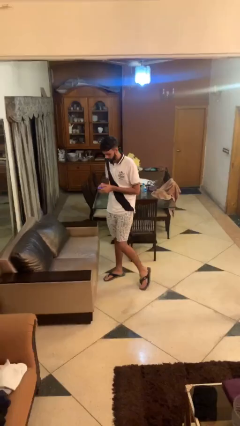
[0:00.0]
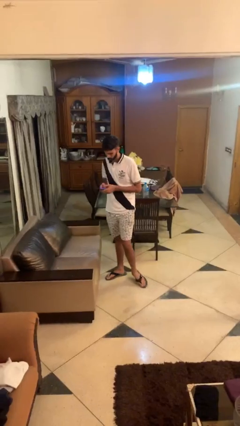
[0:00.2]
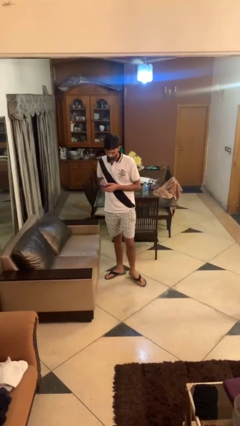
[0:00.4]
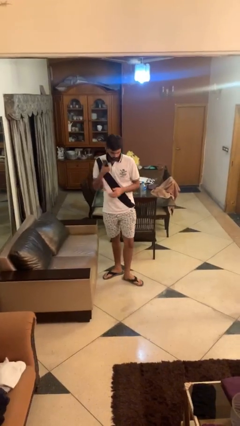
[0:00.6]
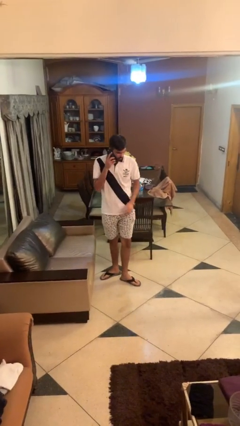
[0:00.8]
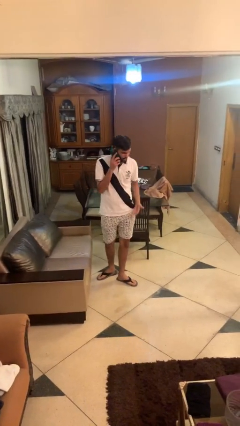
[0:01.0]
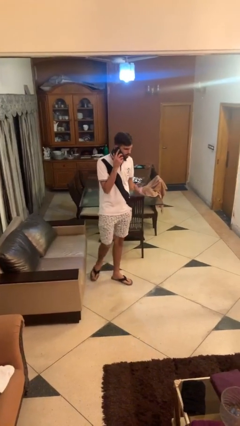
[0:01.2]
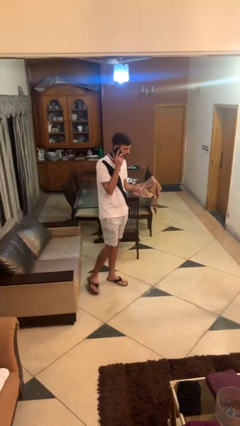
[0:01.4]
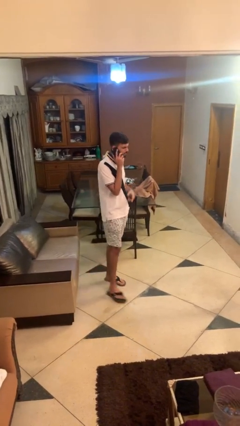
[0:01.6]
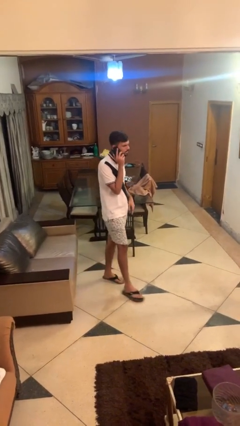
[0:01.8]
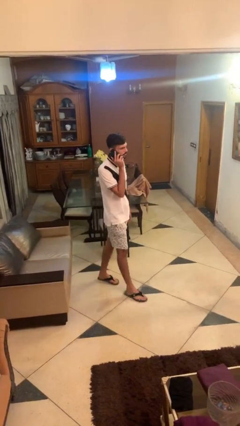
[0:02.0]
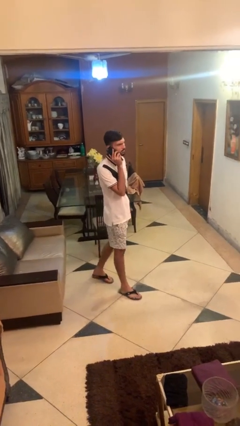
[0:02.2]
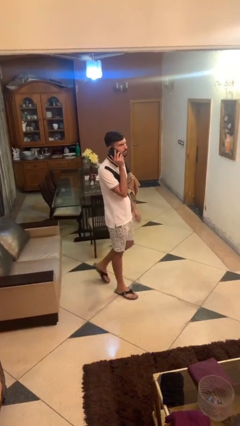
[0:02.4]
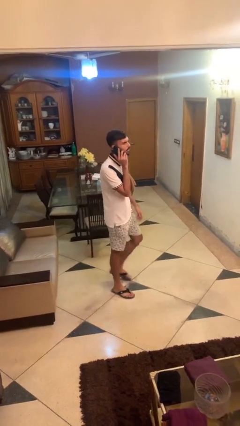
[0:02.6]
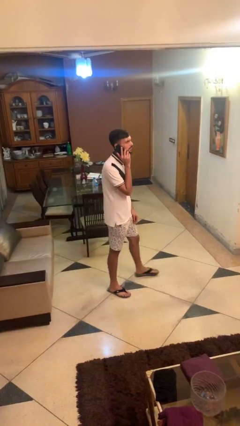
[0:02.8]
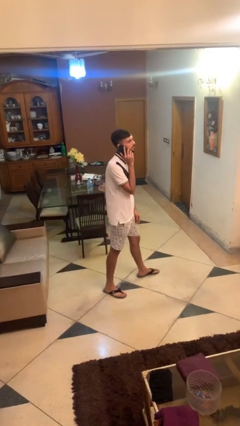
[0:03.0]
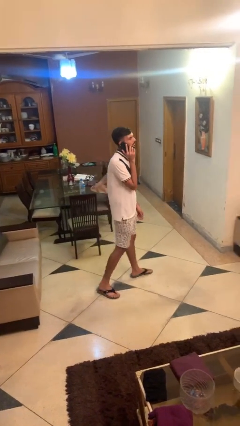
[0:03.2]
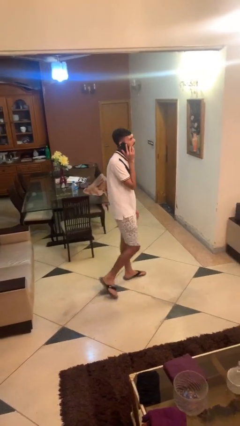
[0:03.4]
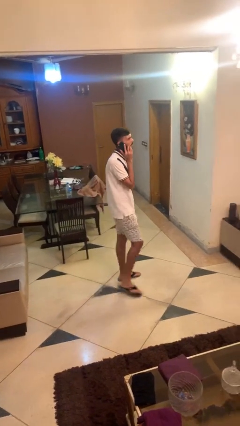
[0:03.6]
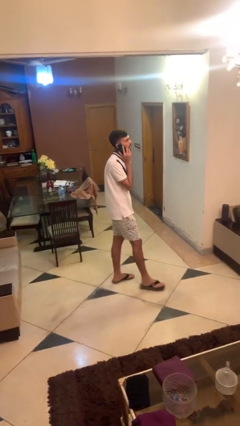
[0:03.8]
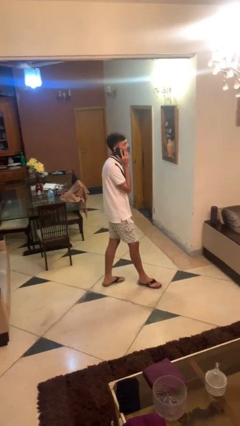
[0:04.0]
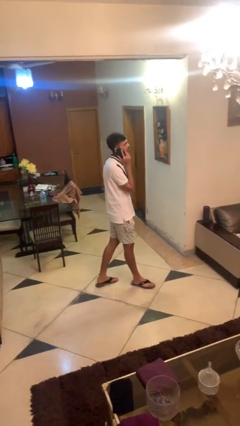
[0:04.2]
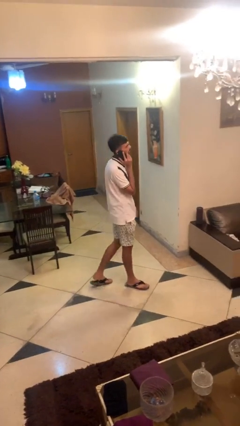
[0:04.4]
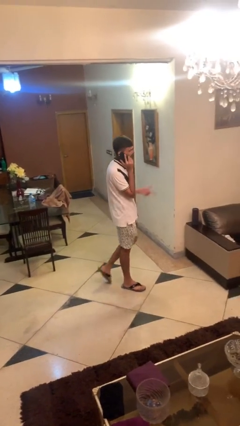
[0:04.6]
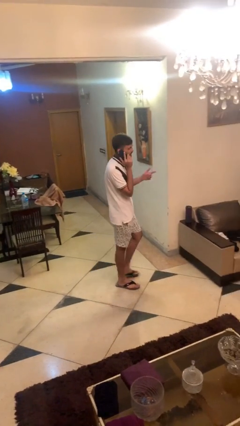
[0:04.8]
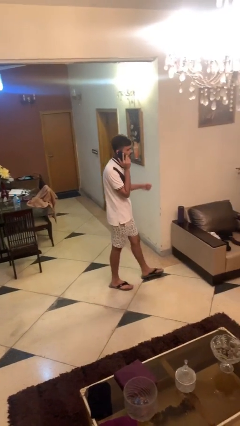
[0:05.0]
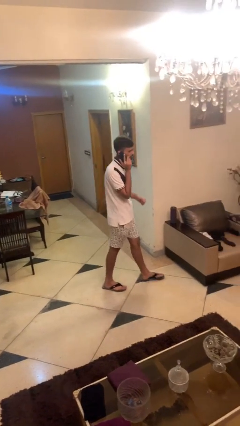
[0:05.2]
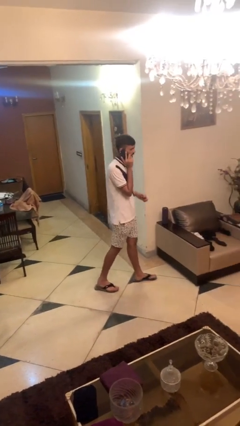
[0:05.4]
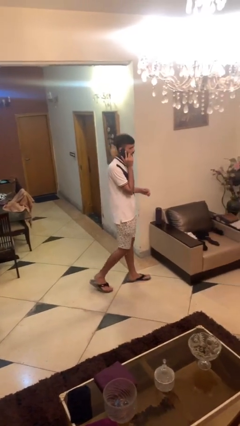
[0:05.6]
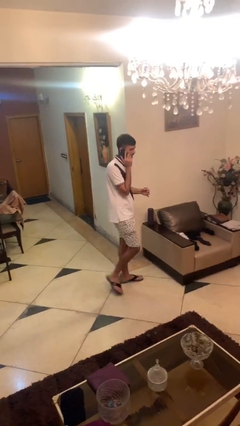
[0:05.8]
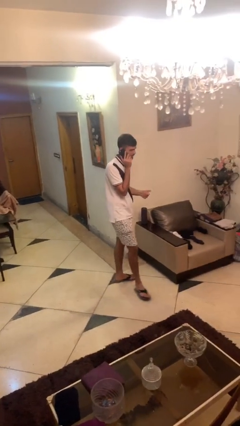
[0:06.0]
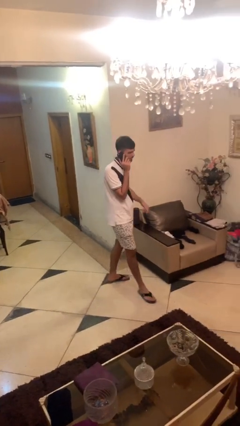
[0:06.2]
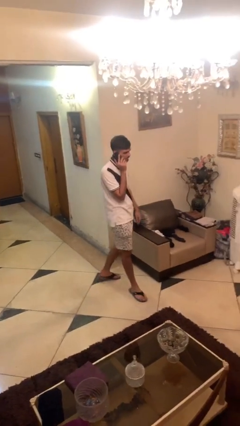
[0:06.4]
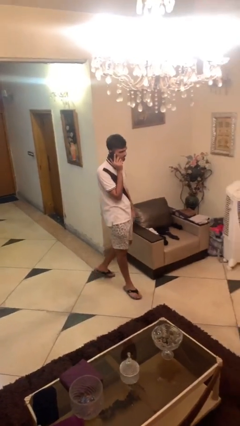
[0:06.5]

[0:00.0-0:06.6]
person talks on phone

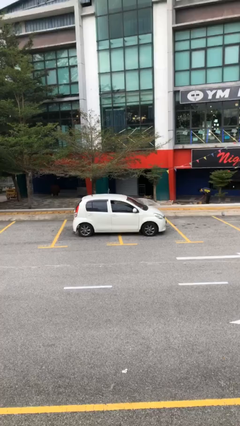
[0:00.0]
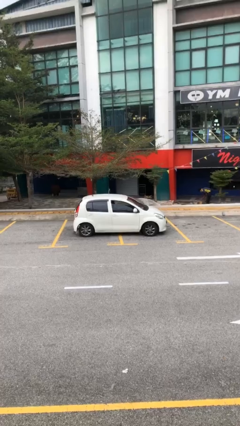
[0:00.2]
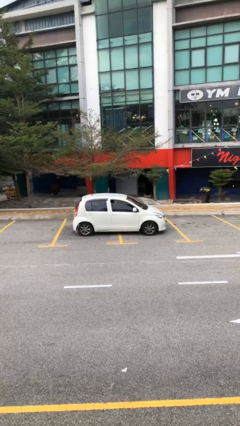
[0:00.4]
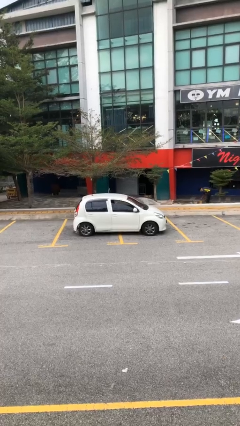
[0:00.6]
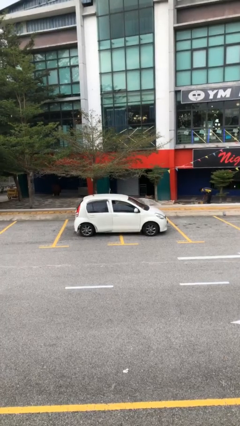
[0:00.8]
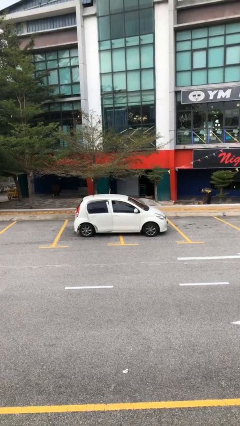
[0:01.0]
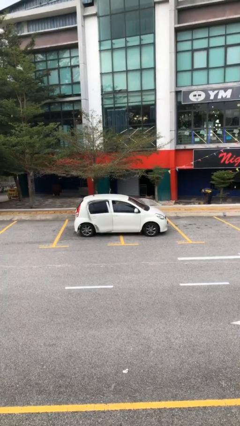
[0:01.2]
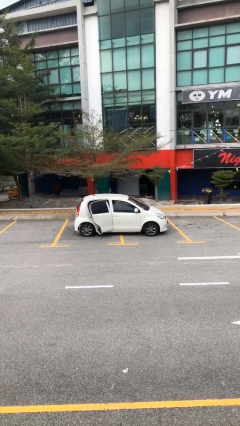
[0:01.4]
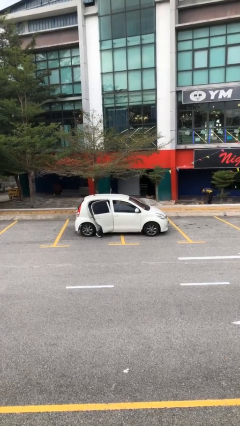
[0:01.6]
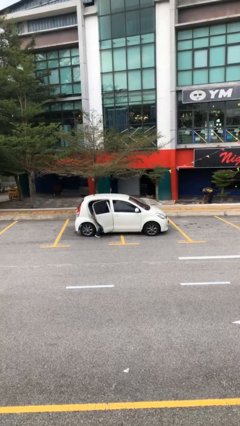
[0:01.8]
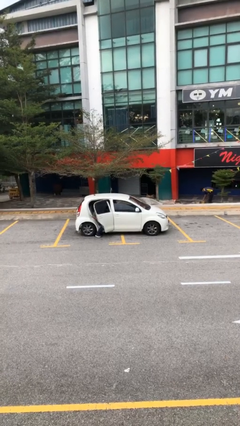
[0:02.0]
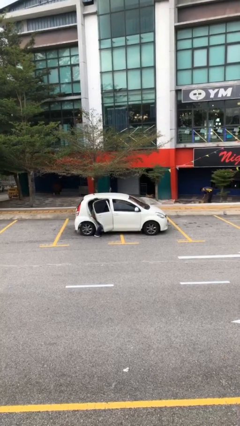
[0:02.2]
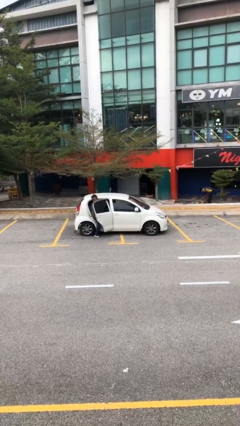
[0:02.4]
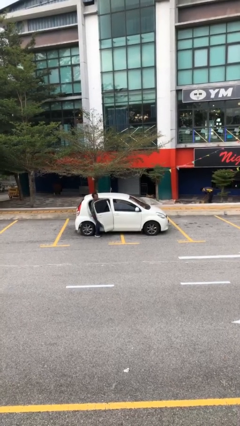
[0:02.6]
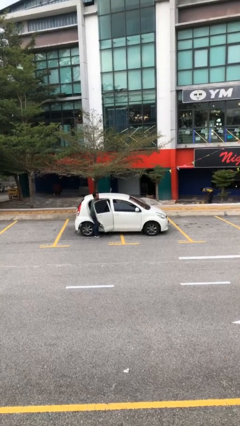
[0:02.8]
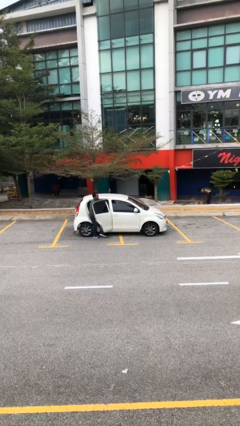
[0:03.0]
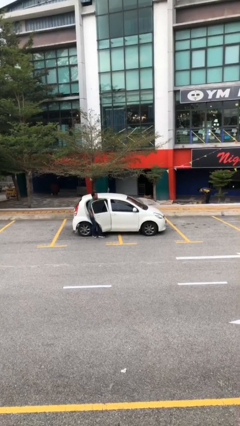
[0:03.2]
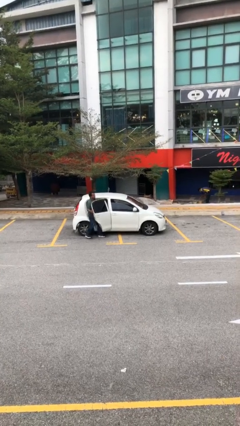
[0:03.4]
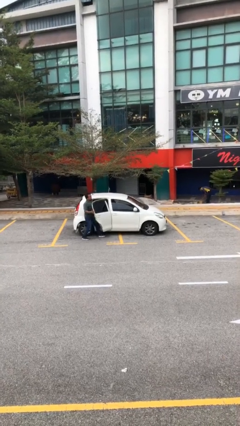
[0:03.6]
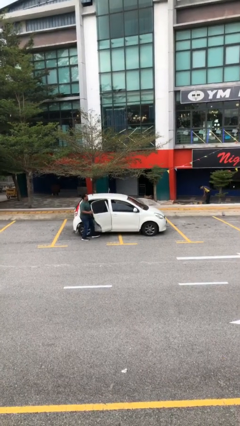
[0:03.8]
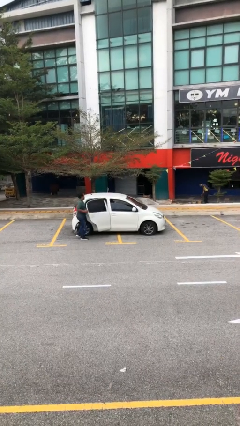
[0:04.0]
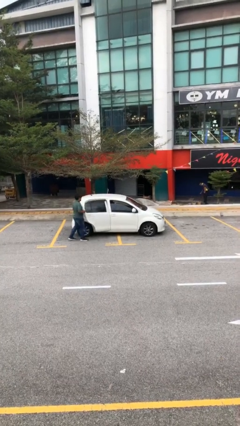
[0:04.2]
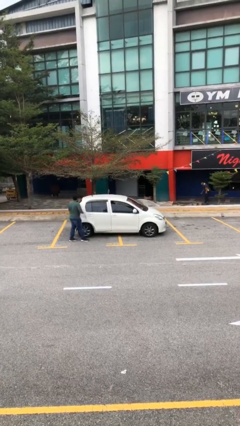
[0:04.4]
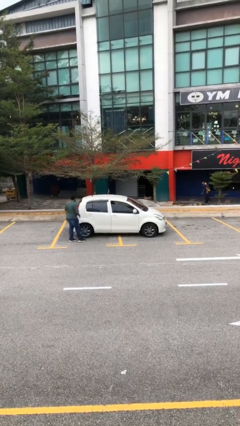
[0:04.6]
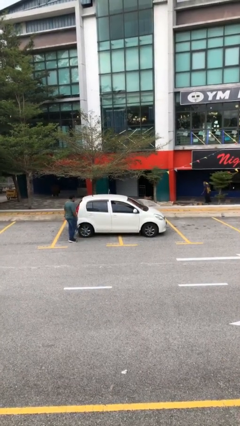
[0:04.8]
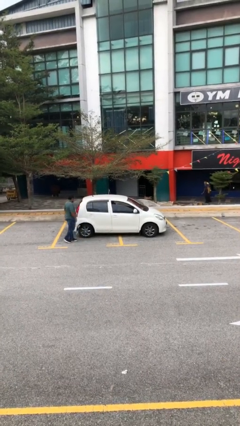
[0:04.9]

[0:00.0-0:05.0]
car drops off person

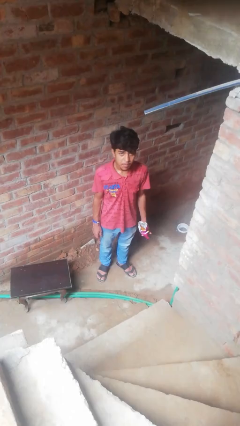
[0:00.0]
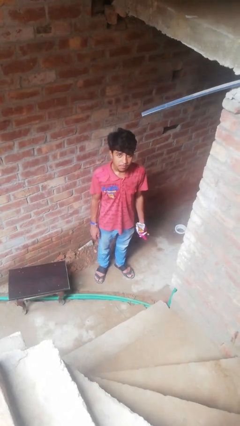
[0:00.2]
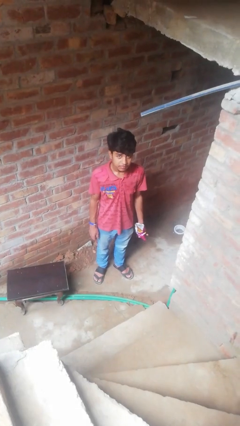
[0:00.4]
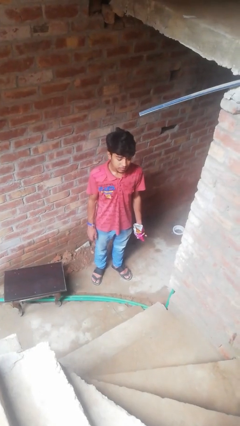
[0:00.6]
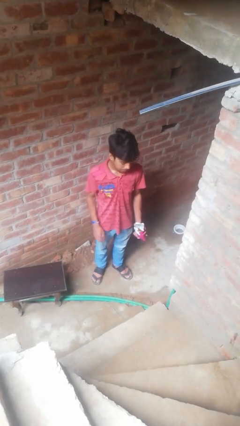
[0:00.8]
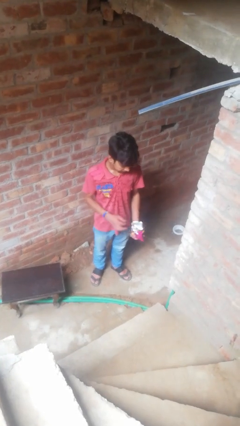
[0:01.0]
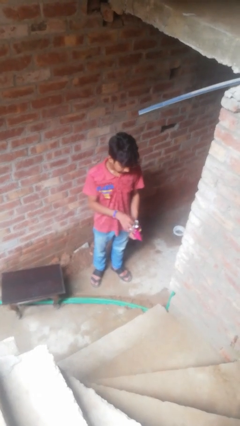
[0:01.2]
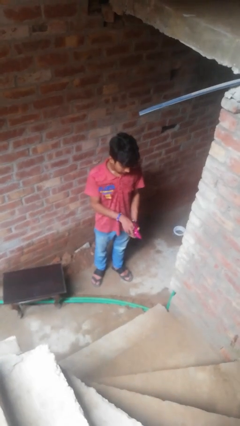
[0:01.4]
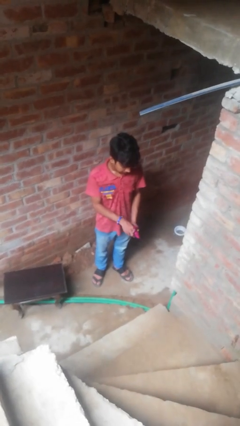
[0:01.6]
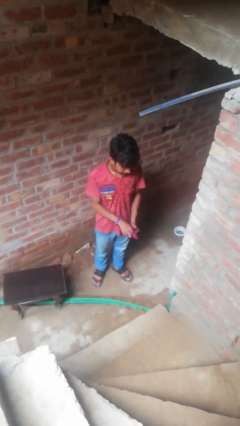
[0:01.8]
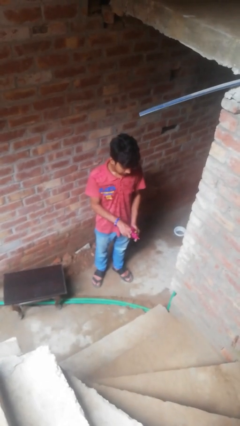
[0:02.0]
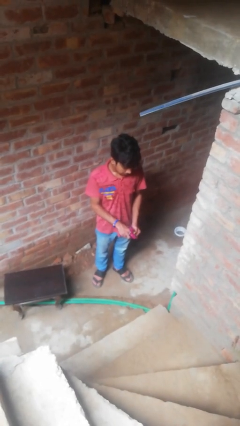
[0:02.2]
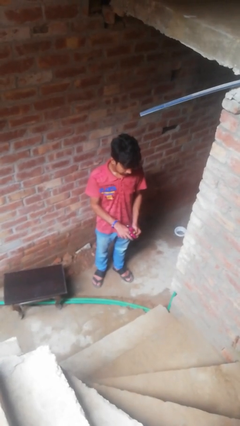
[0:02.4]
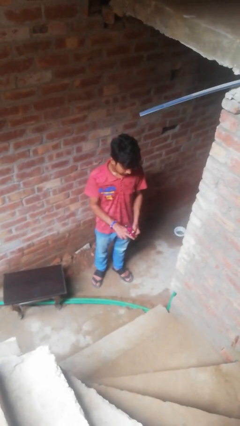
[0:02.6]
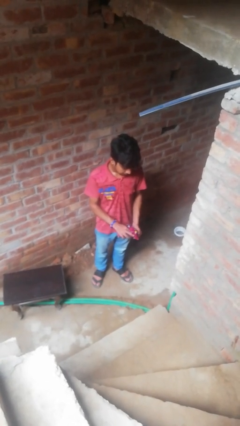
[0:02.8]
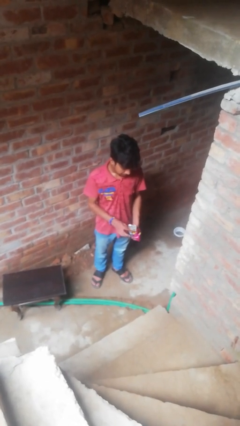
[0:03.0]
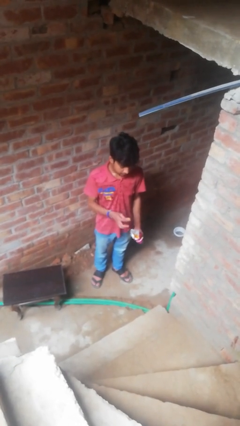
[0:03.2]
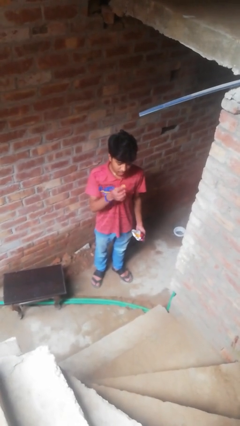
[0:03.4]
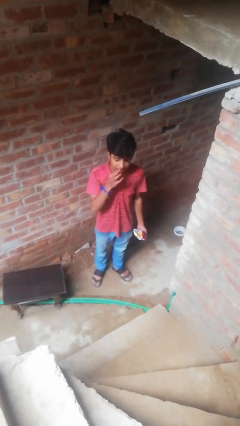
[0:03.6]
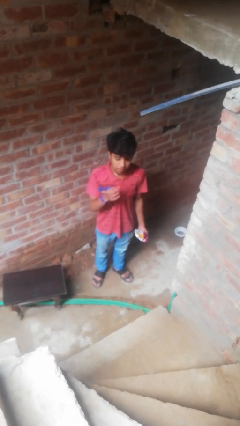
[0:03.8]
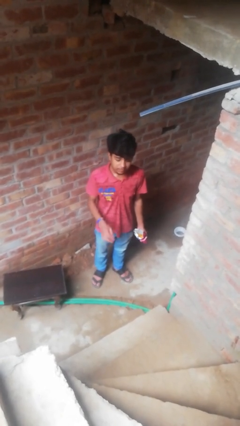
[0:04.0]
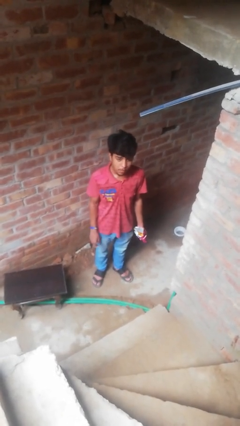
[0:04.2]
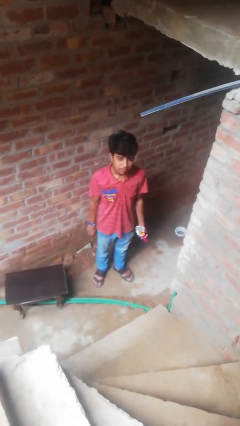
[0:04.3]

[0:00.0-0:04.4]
person eats snack from bag

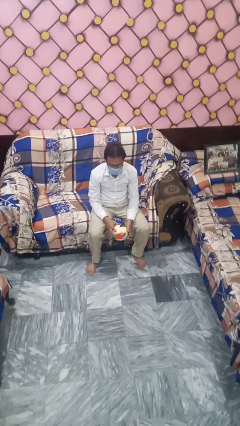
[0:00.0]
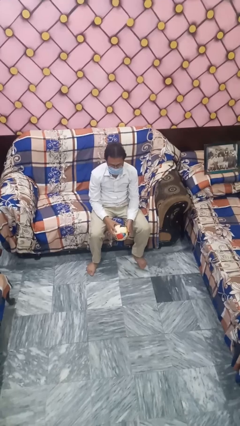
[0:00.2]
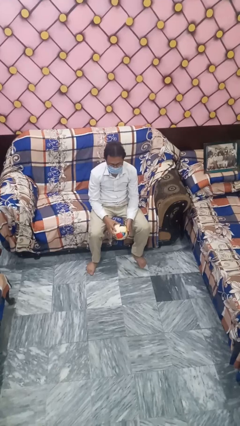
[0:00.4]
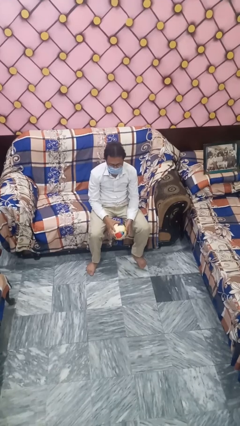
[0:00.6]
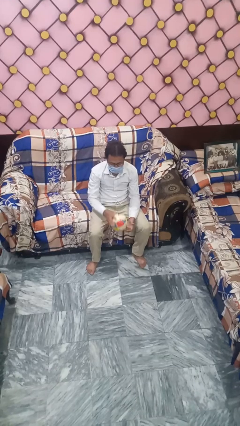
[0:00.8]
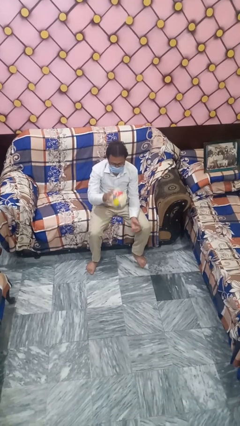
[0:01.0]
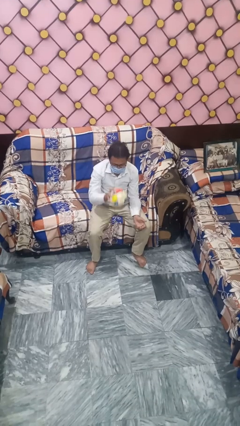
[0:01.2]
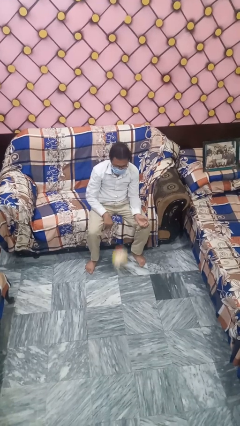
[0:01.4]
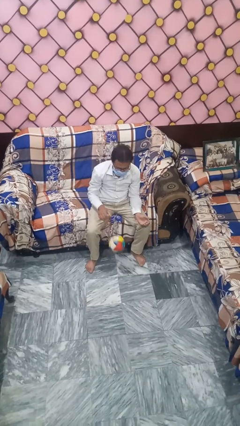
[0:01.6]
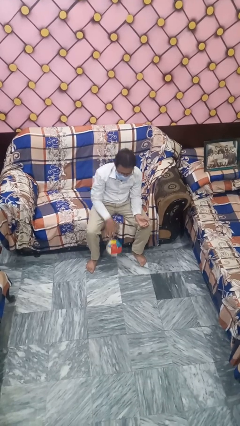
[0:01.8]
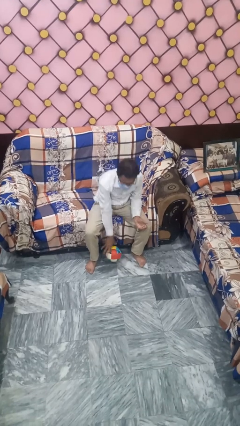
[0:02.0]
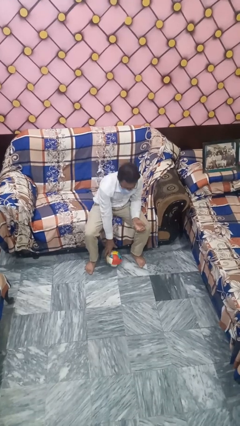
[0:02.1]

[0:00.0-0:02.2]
person bounces ball on floor
